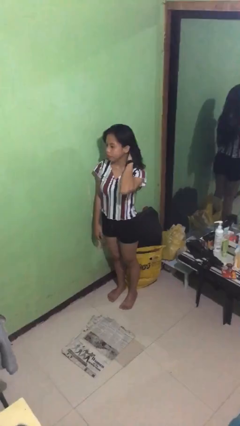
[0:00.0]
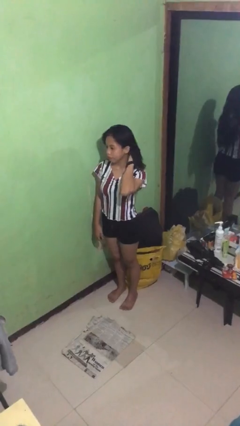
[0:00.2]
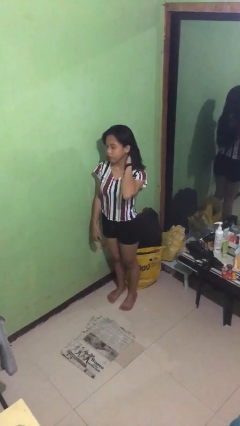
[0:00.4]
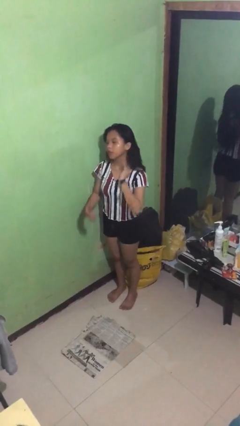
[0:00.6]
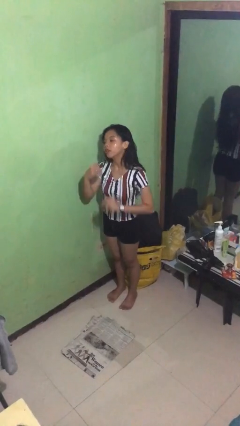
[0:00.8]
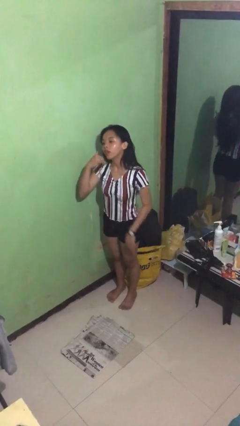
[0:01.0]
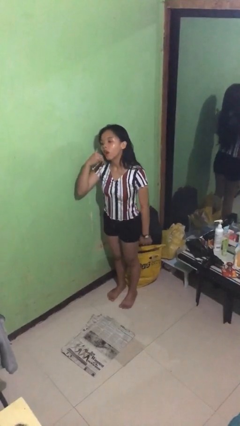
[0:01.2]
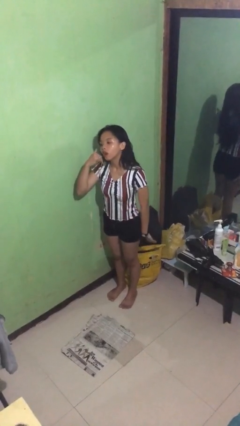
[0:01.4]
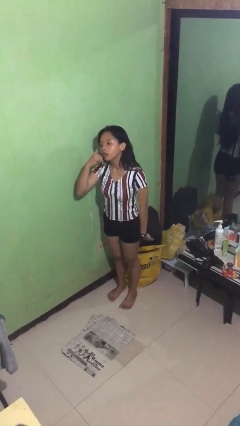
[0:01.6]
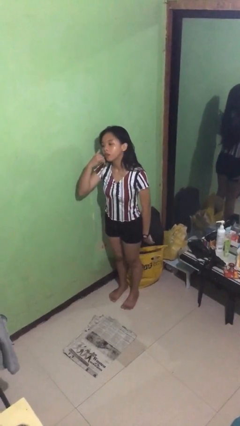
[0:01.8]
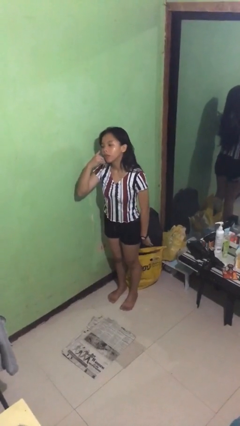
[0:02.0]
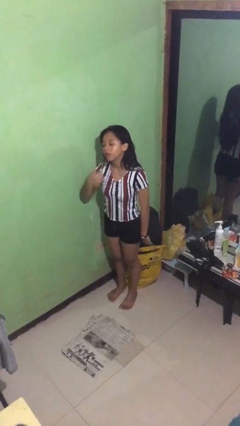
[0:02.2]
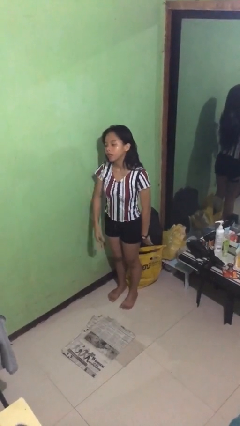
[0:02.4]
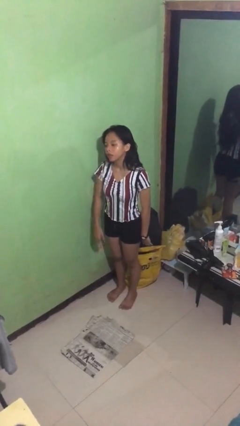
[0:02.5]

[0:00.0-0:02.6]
person gestures call me

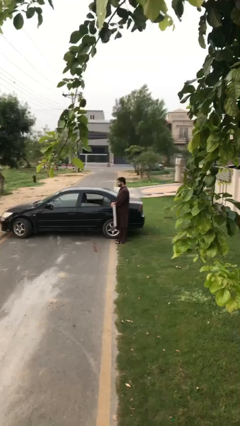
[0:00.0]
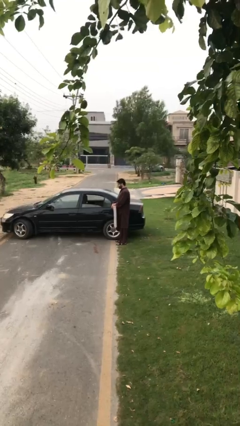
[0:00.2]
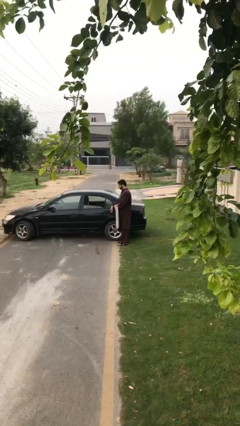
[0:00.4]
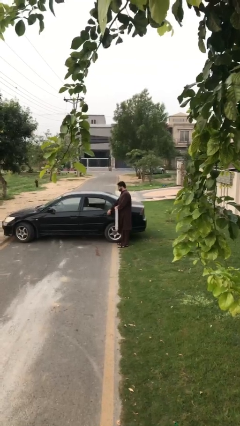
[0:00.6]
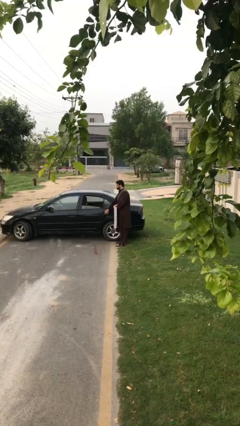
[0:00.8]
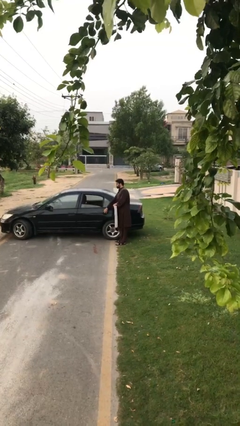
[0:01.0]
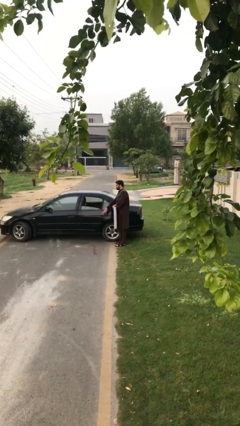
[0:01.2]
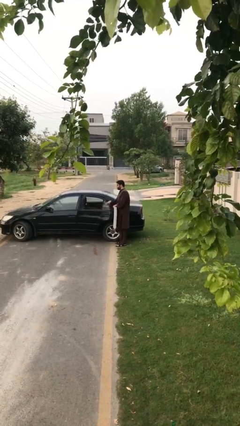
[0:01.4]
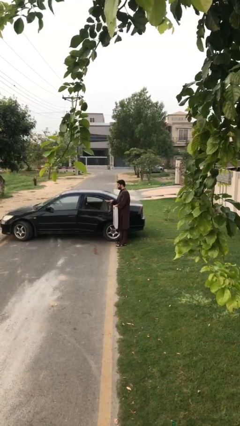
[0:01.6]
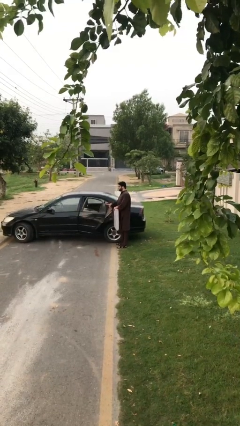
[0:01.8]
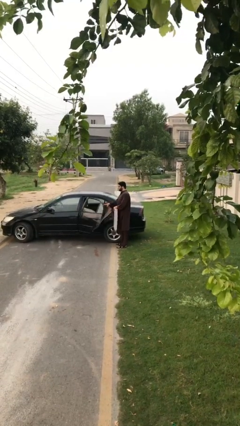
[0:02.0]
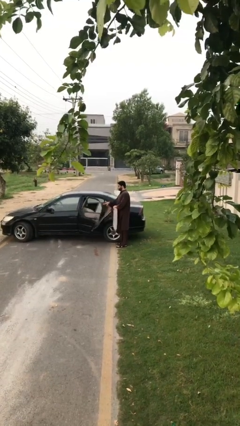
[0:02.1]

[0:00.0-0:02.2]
person opens car door

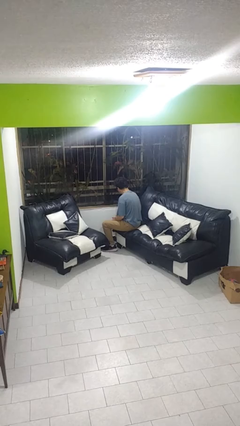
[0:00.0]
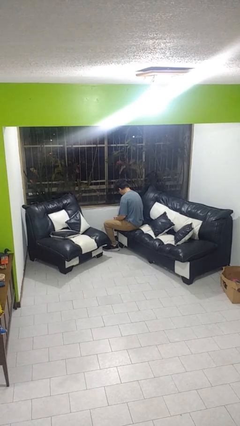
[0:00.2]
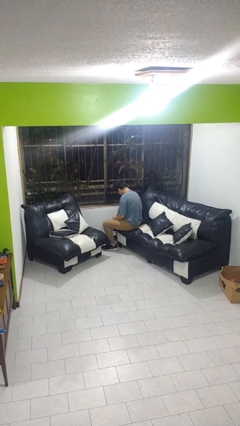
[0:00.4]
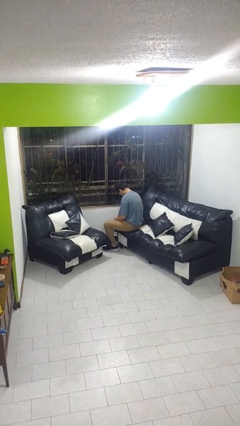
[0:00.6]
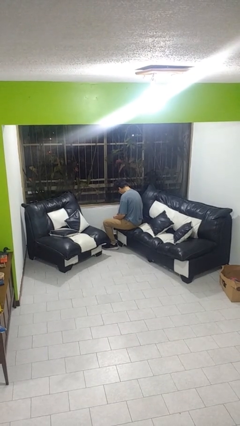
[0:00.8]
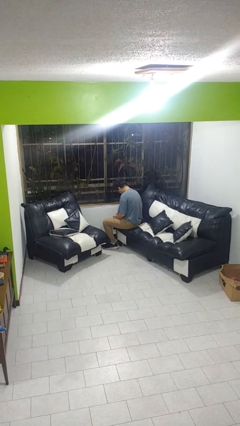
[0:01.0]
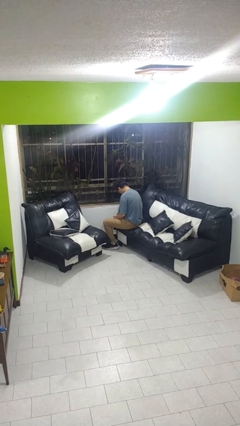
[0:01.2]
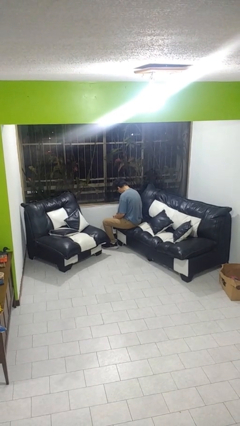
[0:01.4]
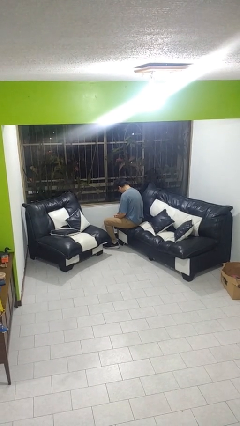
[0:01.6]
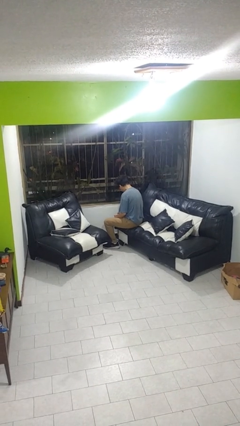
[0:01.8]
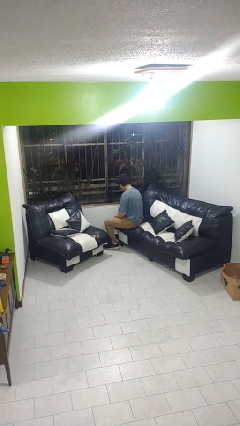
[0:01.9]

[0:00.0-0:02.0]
person looks at hands in lap

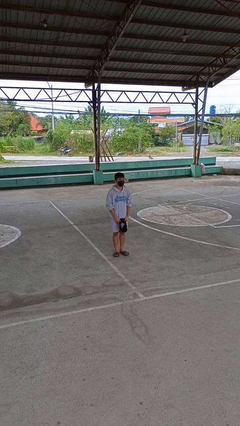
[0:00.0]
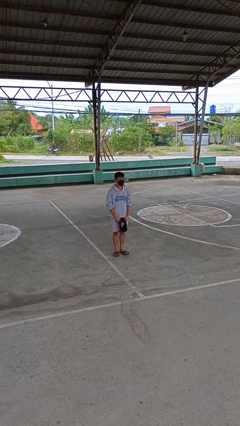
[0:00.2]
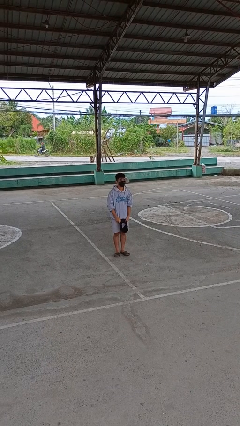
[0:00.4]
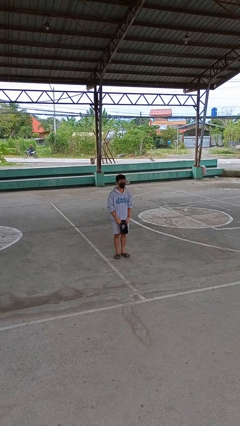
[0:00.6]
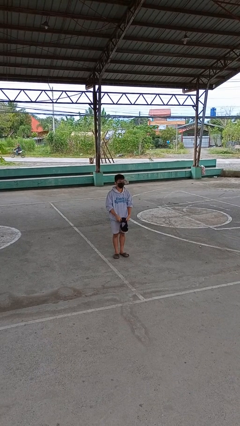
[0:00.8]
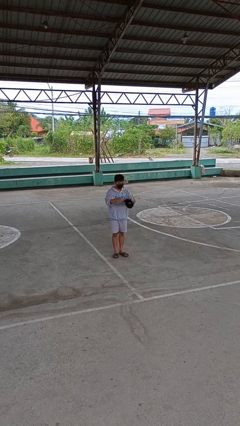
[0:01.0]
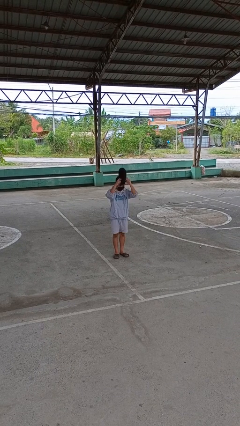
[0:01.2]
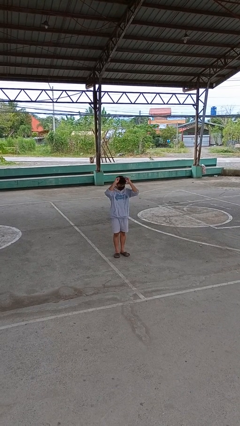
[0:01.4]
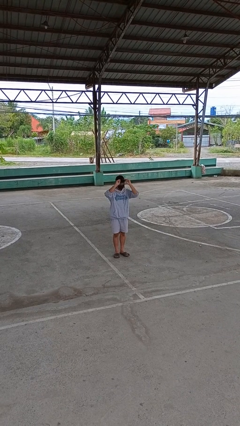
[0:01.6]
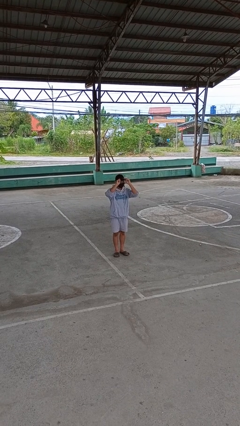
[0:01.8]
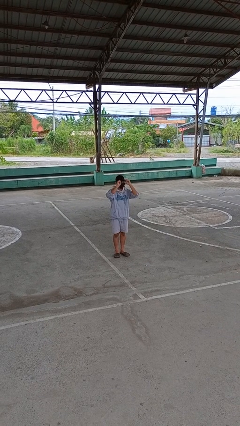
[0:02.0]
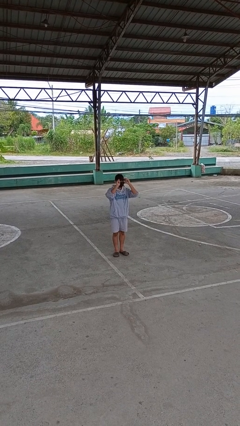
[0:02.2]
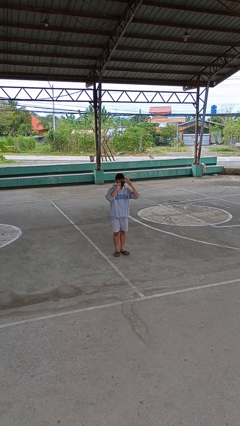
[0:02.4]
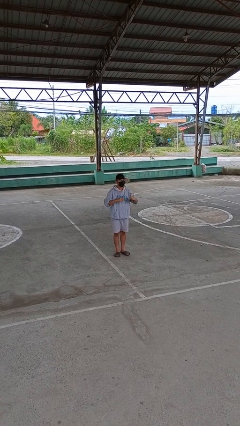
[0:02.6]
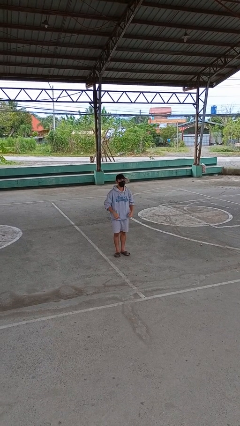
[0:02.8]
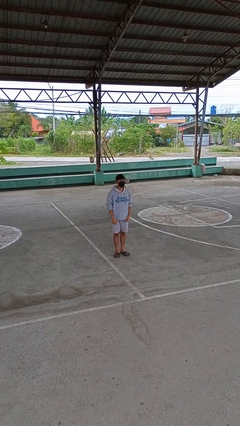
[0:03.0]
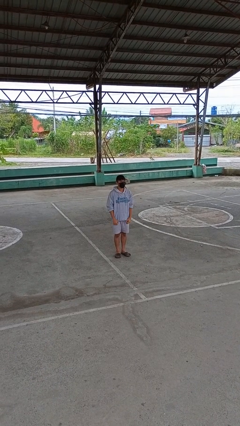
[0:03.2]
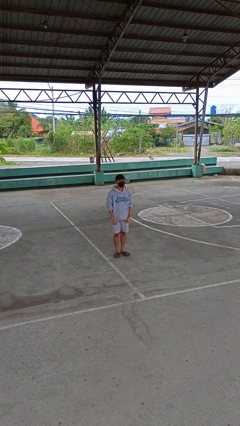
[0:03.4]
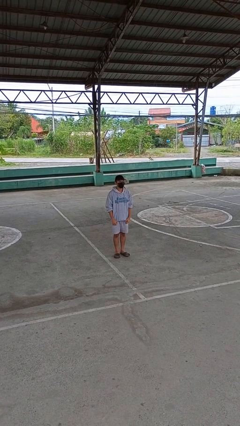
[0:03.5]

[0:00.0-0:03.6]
person puts on hat

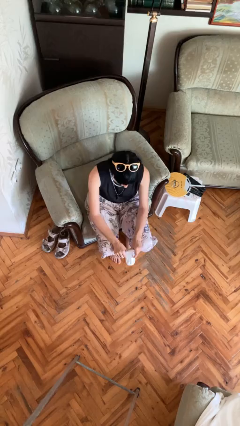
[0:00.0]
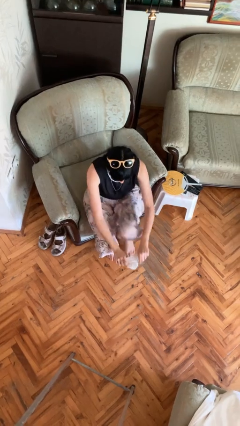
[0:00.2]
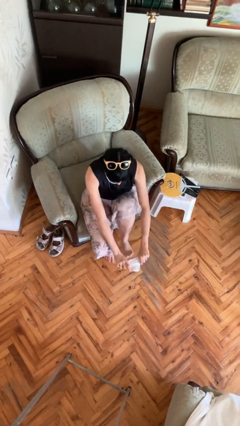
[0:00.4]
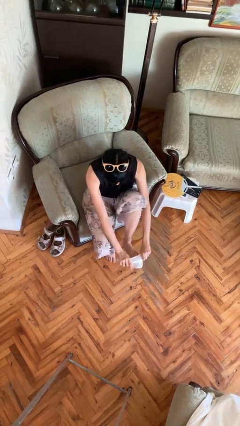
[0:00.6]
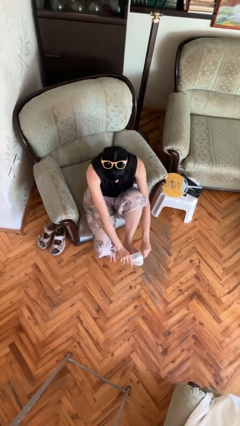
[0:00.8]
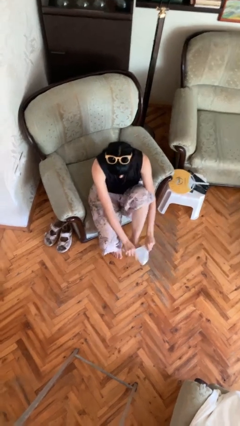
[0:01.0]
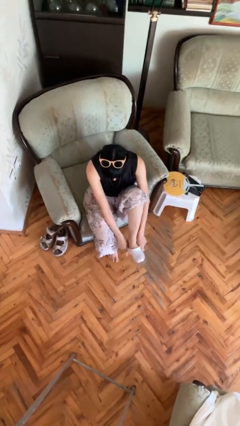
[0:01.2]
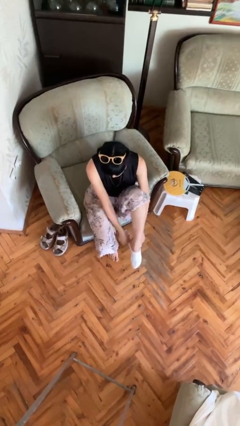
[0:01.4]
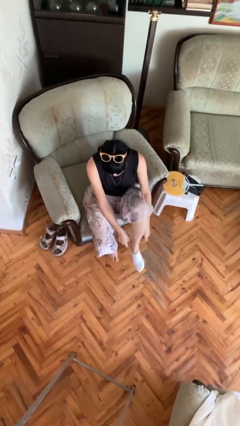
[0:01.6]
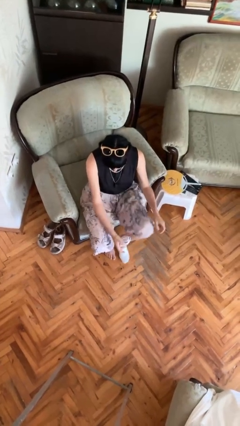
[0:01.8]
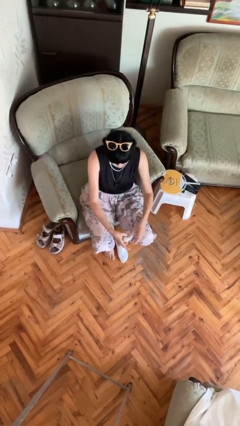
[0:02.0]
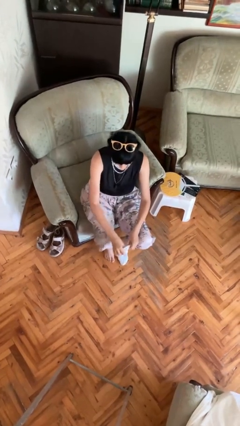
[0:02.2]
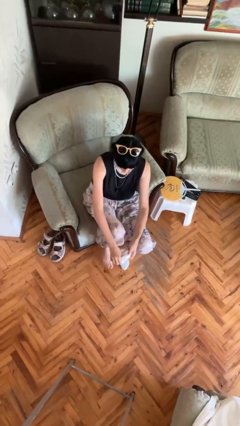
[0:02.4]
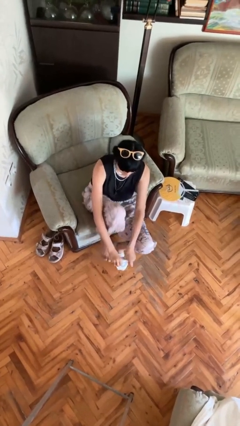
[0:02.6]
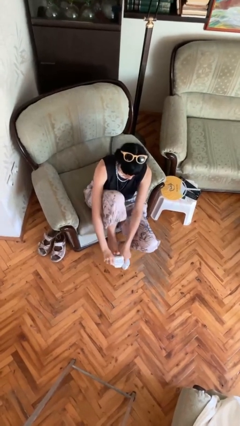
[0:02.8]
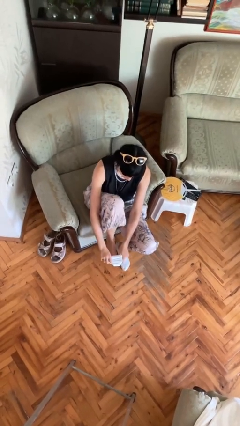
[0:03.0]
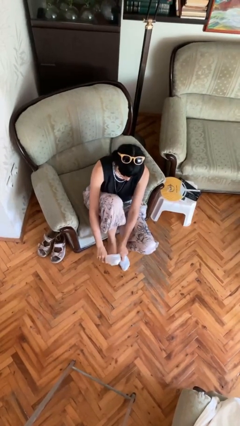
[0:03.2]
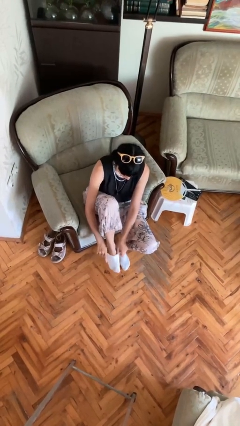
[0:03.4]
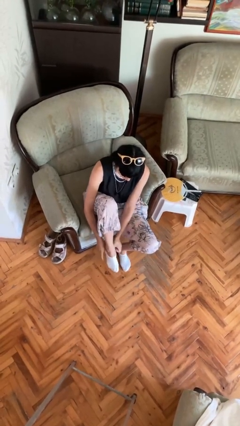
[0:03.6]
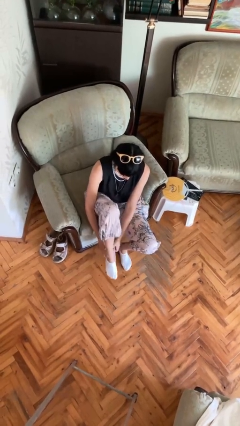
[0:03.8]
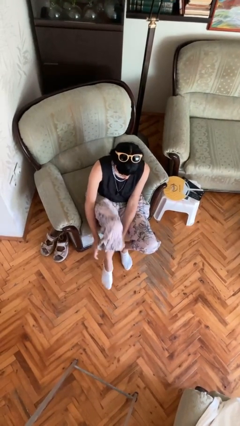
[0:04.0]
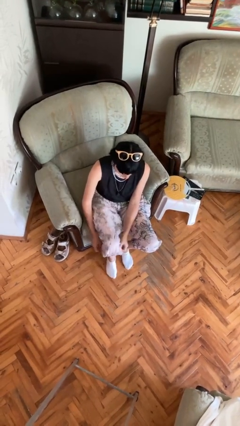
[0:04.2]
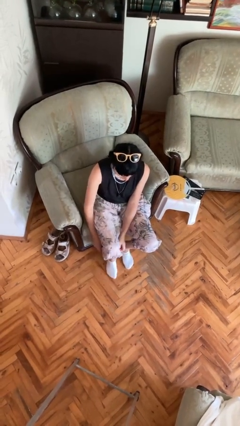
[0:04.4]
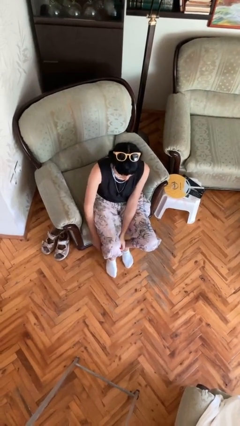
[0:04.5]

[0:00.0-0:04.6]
person puts on socks

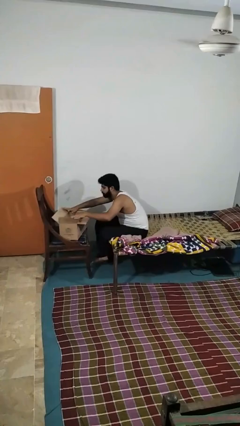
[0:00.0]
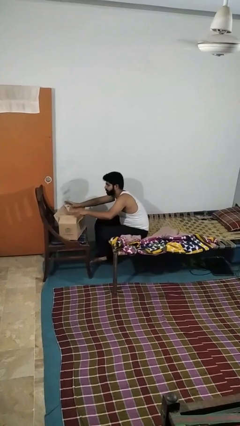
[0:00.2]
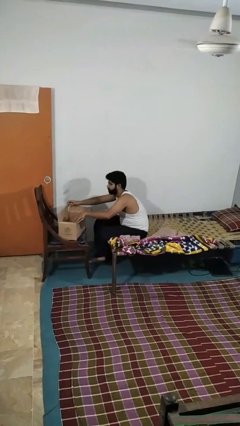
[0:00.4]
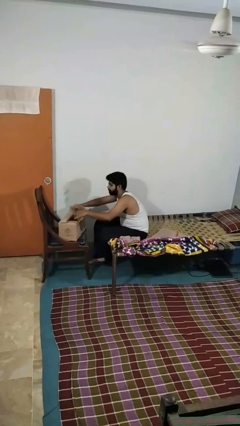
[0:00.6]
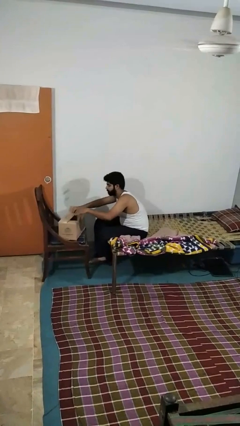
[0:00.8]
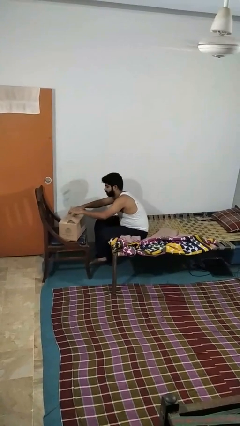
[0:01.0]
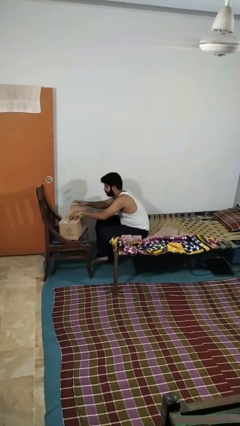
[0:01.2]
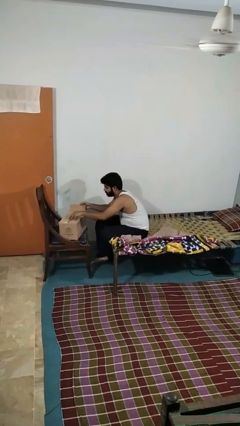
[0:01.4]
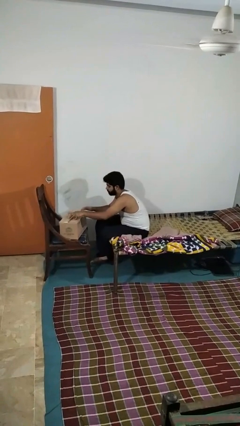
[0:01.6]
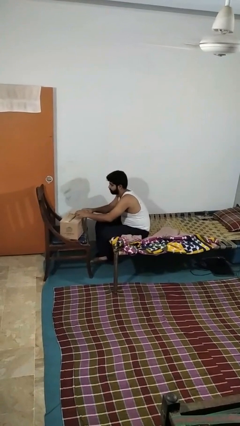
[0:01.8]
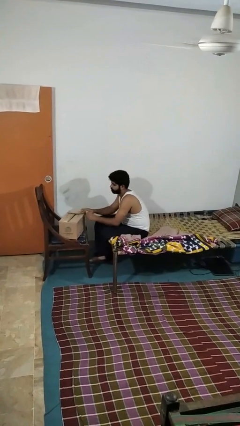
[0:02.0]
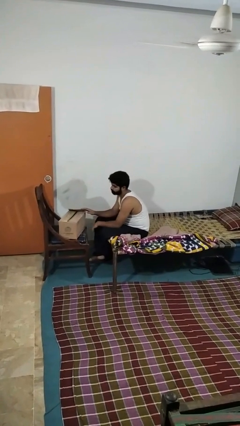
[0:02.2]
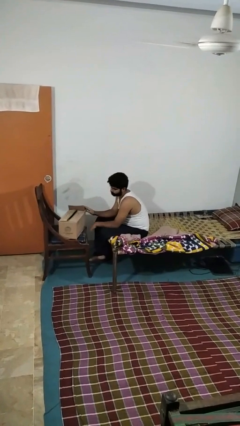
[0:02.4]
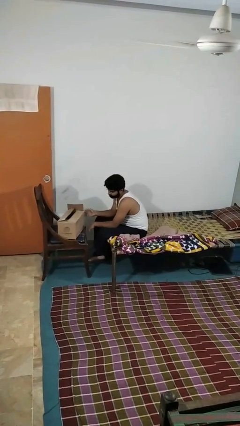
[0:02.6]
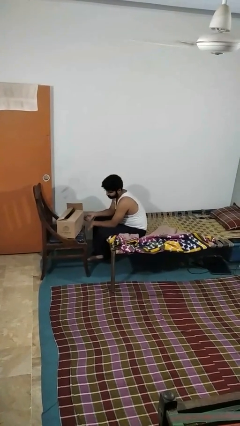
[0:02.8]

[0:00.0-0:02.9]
person closes box
